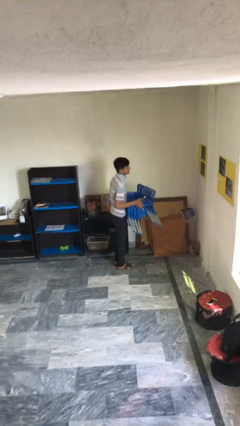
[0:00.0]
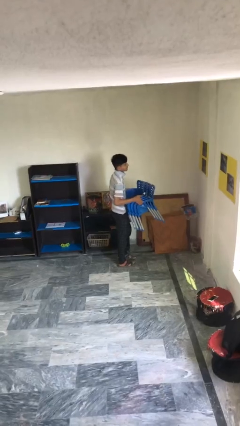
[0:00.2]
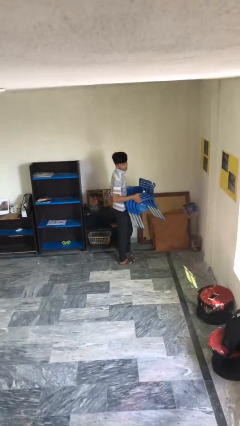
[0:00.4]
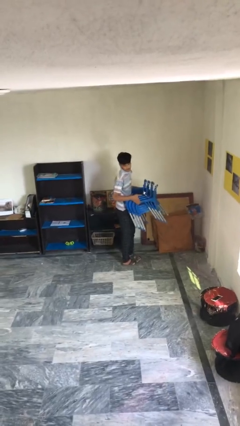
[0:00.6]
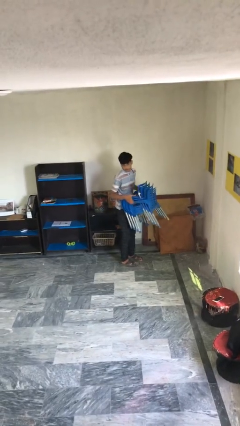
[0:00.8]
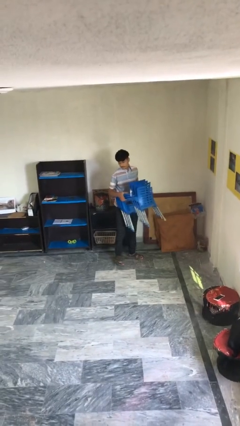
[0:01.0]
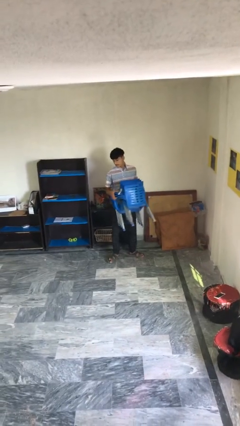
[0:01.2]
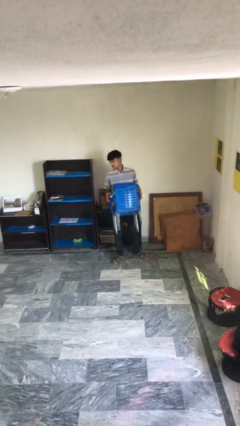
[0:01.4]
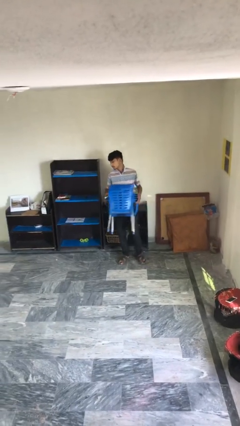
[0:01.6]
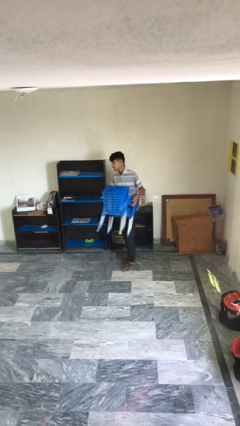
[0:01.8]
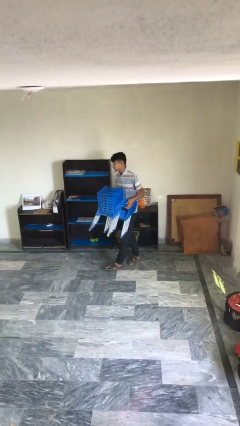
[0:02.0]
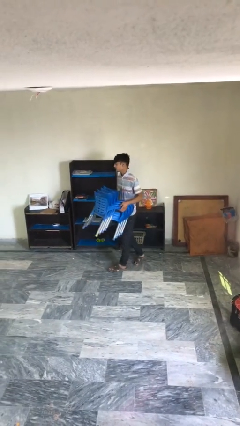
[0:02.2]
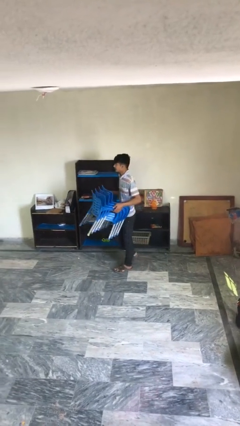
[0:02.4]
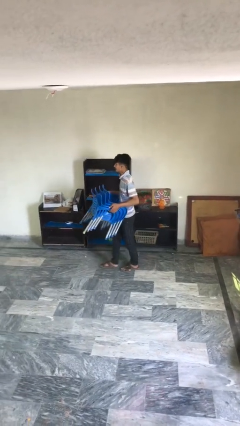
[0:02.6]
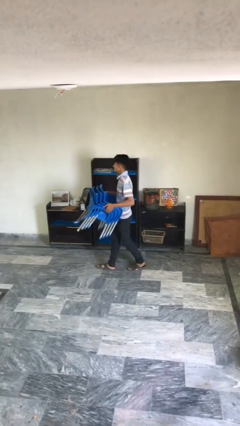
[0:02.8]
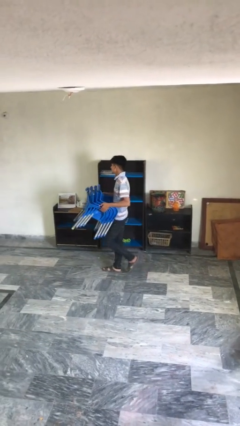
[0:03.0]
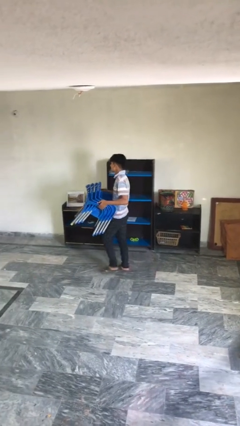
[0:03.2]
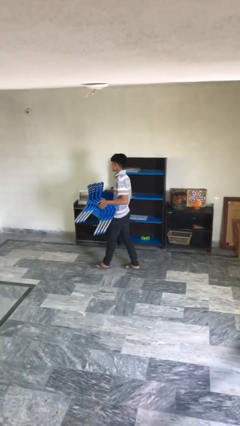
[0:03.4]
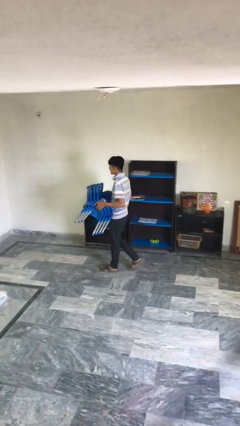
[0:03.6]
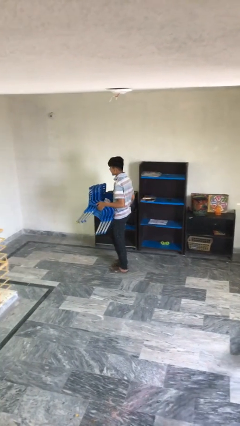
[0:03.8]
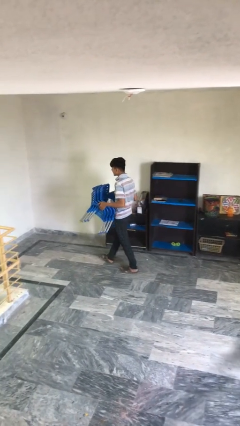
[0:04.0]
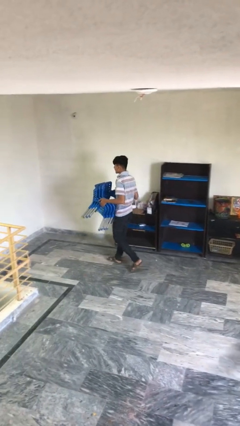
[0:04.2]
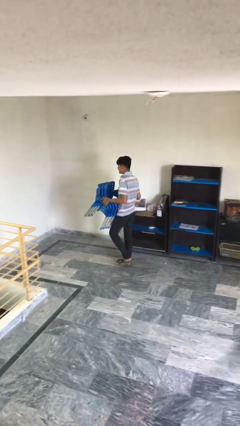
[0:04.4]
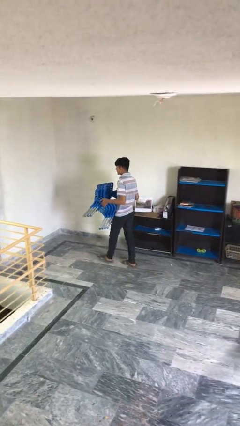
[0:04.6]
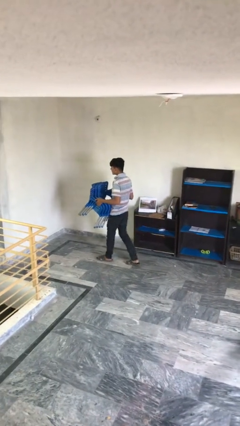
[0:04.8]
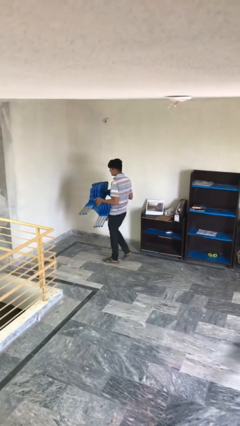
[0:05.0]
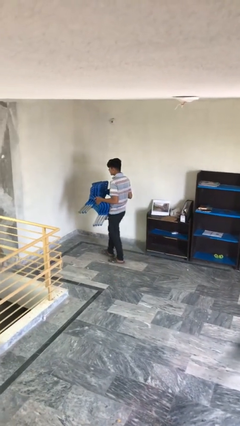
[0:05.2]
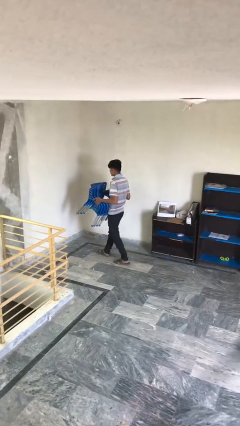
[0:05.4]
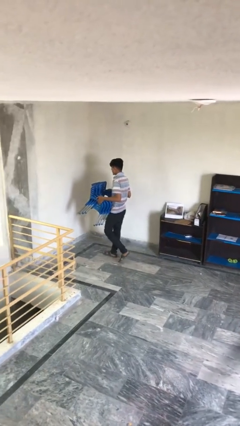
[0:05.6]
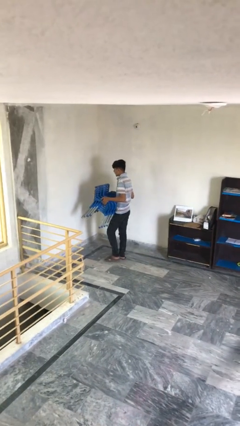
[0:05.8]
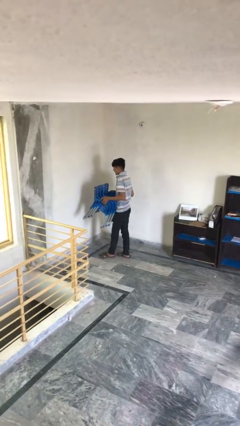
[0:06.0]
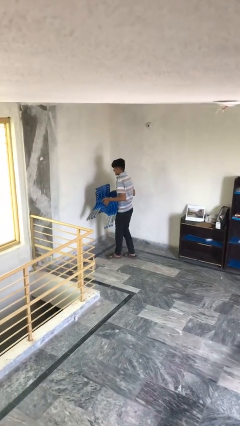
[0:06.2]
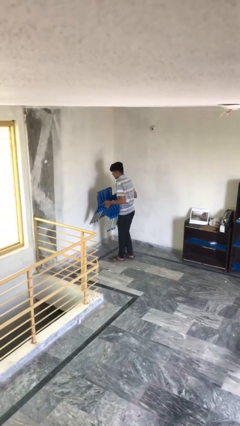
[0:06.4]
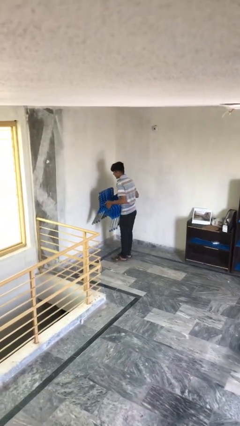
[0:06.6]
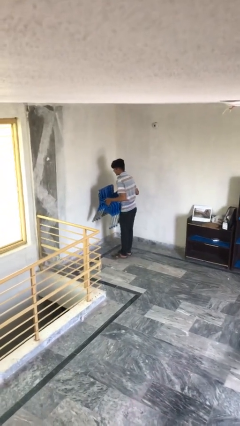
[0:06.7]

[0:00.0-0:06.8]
person carries heavy object

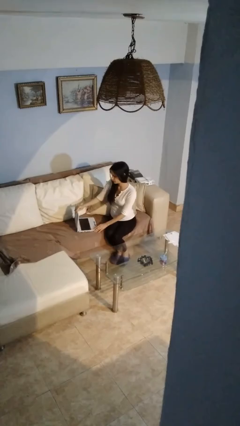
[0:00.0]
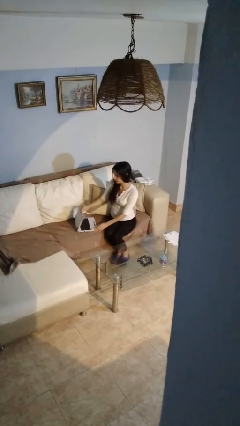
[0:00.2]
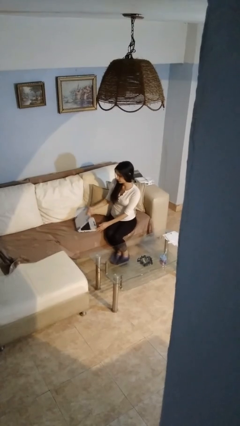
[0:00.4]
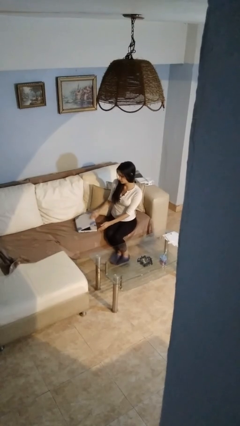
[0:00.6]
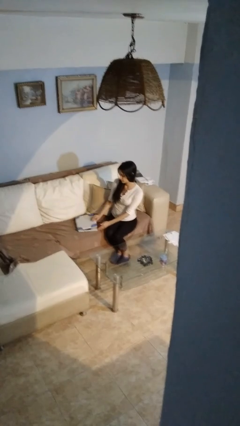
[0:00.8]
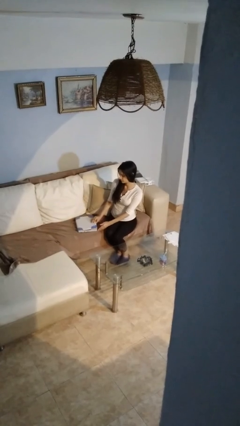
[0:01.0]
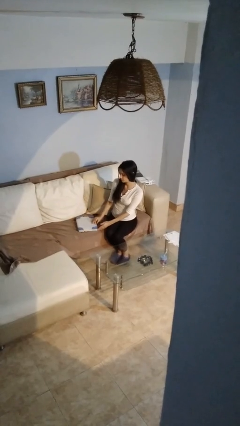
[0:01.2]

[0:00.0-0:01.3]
person closes laptop

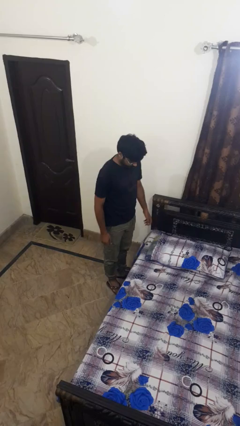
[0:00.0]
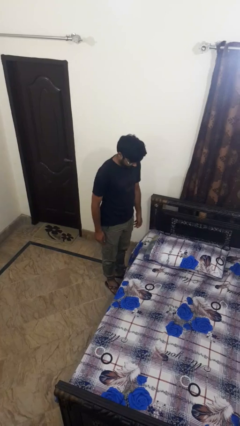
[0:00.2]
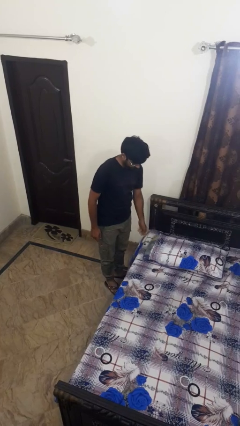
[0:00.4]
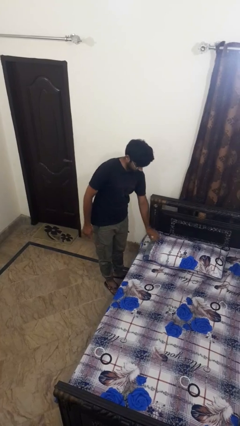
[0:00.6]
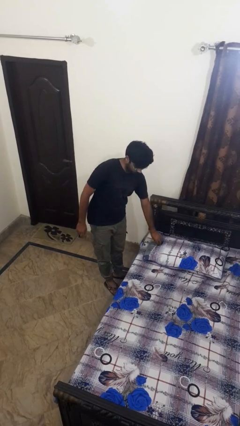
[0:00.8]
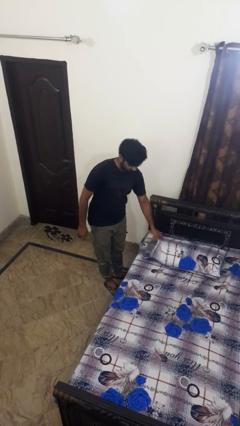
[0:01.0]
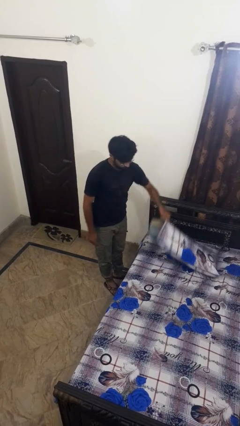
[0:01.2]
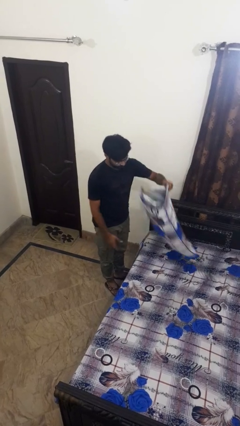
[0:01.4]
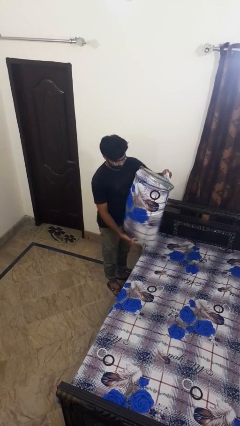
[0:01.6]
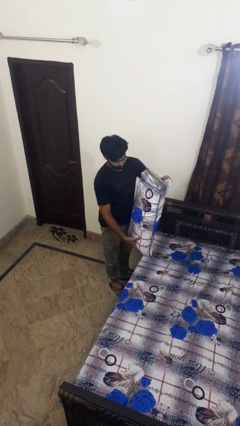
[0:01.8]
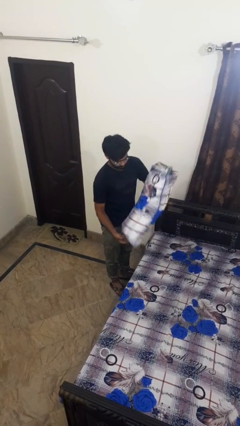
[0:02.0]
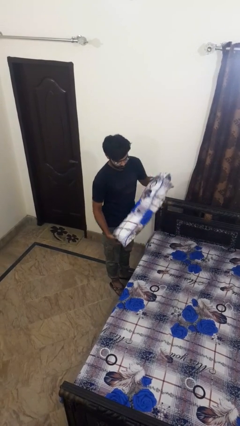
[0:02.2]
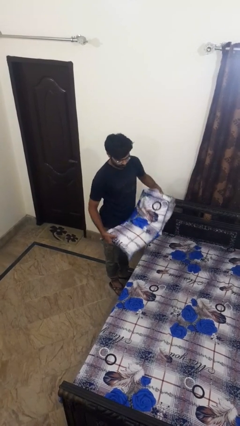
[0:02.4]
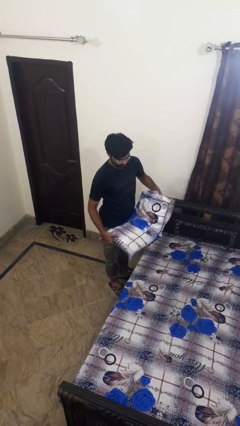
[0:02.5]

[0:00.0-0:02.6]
person picks up object from bed

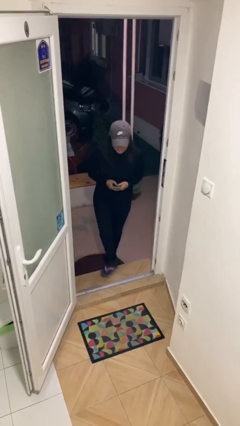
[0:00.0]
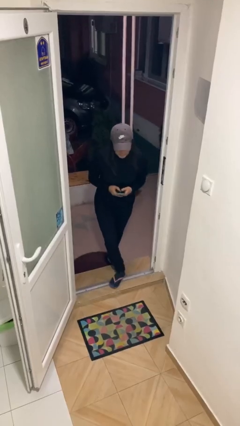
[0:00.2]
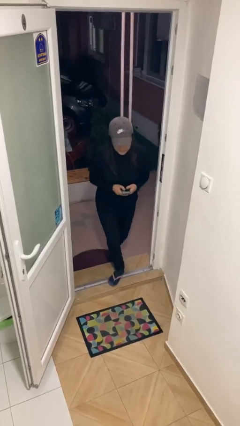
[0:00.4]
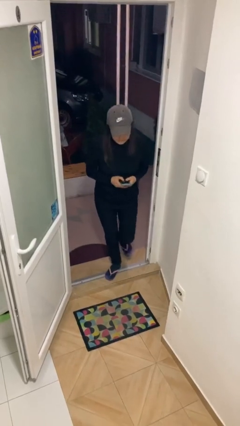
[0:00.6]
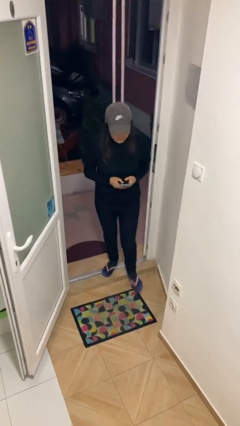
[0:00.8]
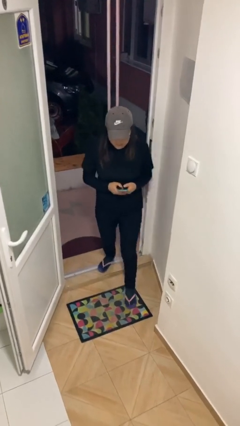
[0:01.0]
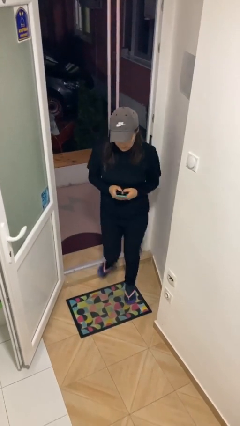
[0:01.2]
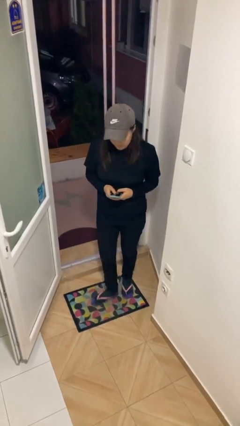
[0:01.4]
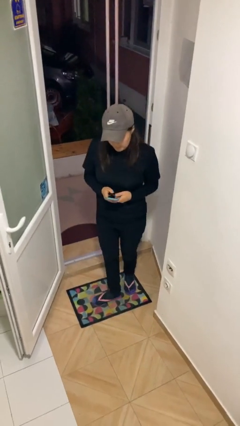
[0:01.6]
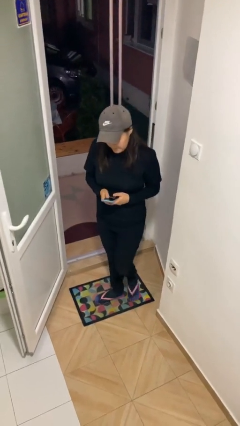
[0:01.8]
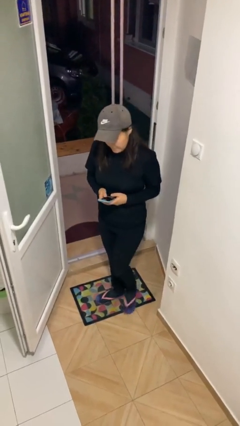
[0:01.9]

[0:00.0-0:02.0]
person enters scene through structure

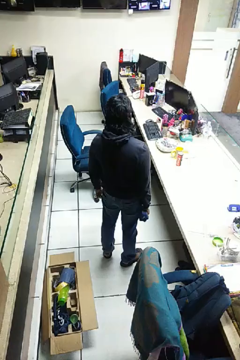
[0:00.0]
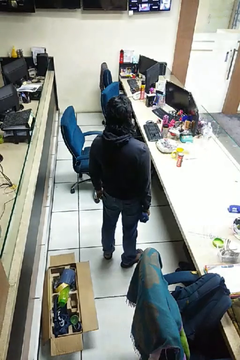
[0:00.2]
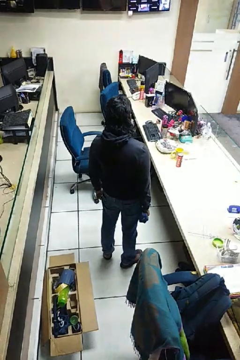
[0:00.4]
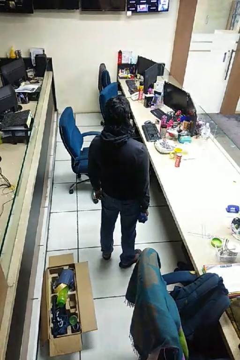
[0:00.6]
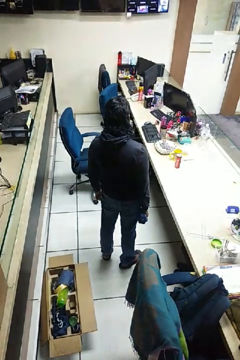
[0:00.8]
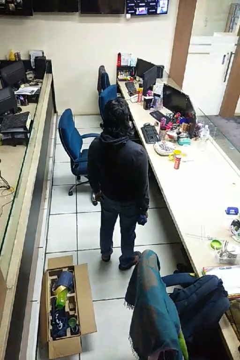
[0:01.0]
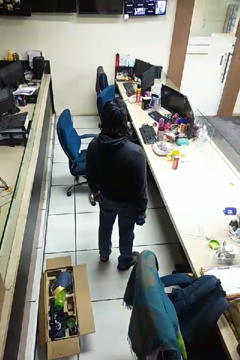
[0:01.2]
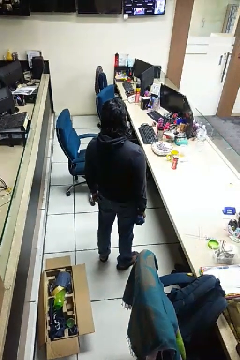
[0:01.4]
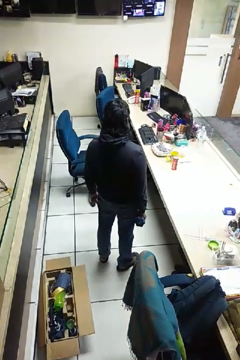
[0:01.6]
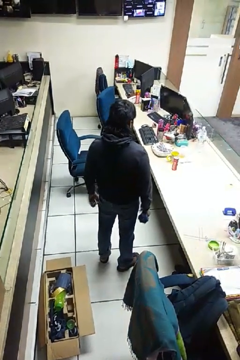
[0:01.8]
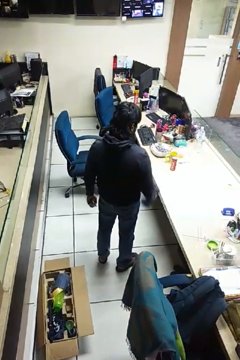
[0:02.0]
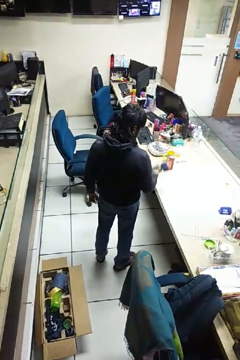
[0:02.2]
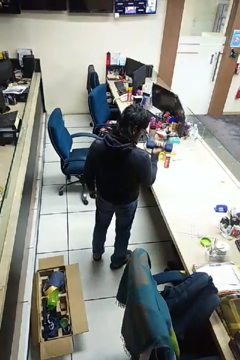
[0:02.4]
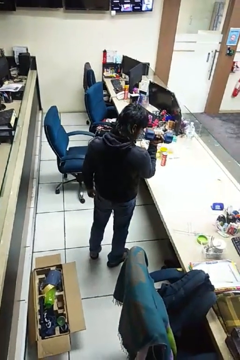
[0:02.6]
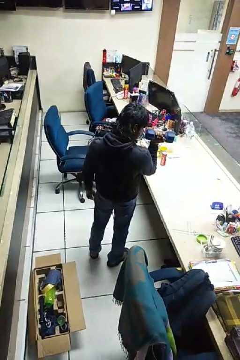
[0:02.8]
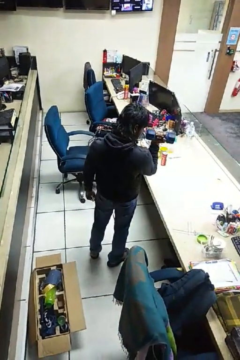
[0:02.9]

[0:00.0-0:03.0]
person lifts dumbbells

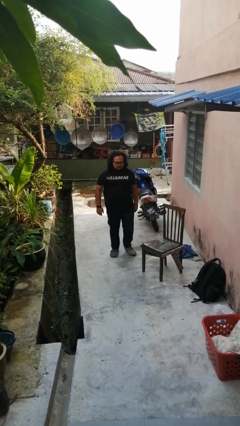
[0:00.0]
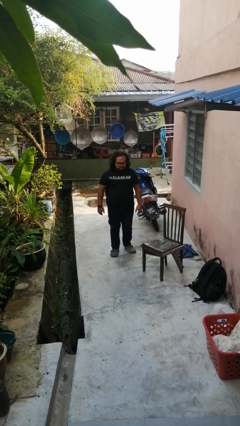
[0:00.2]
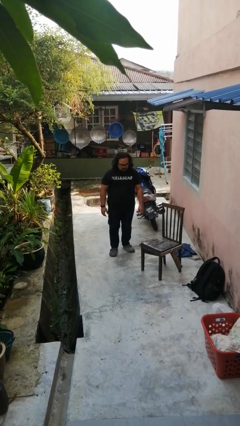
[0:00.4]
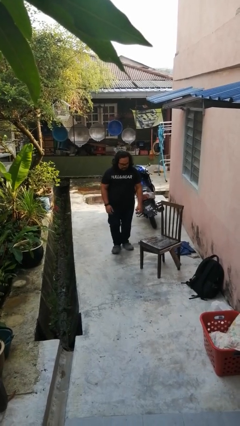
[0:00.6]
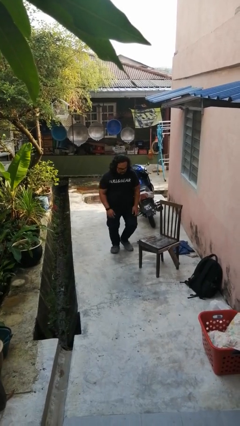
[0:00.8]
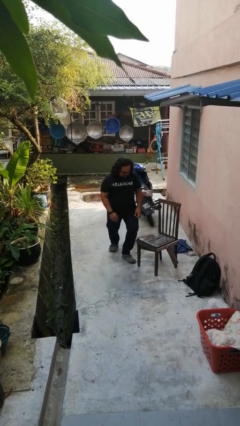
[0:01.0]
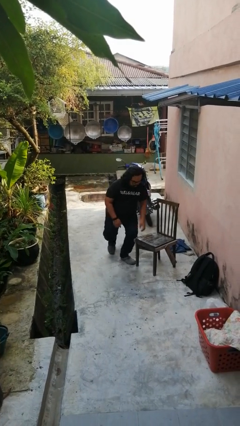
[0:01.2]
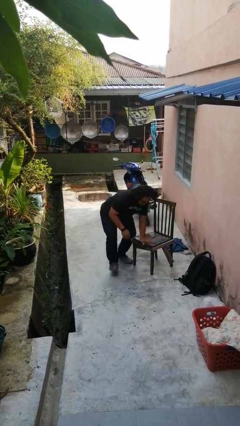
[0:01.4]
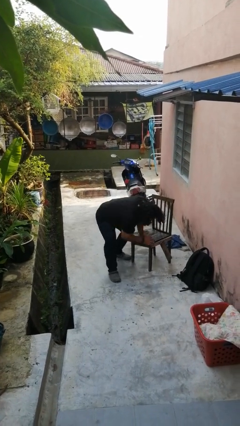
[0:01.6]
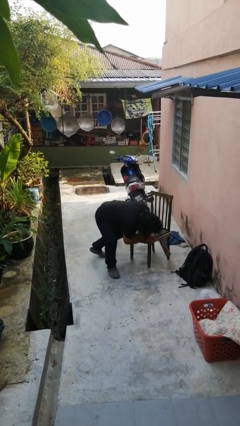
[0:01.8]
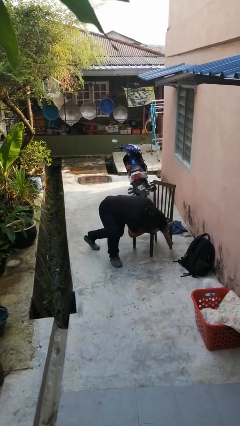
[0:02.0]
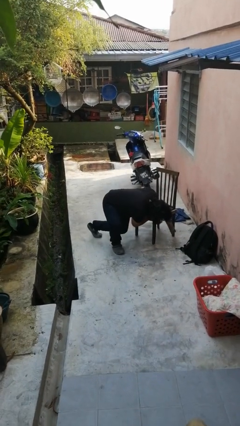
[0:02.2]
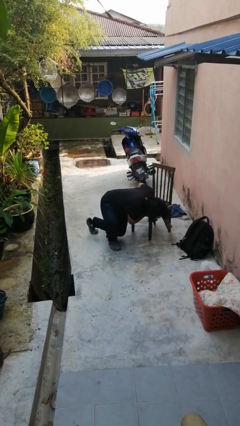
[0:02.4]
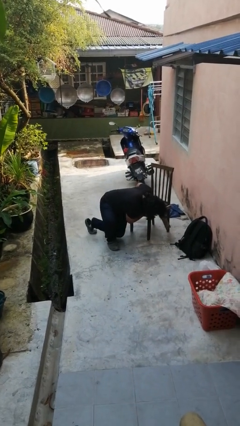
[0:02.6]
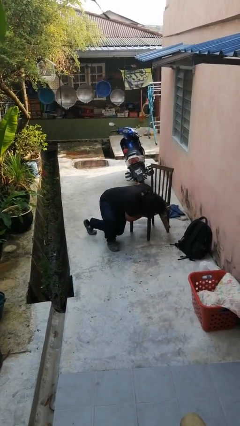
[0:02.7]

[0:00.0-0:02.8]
person trips on object on floor
